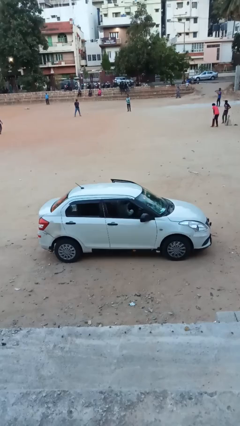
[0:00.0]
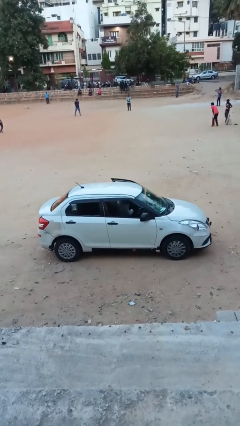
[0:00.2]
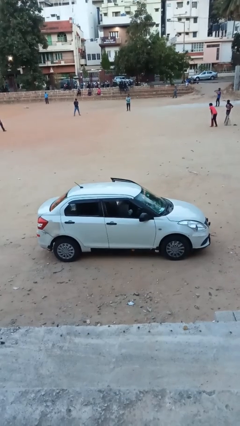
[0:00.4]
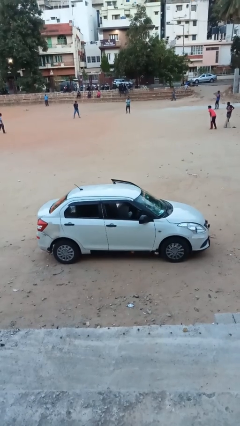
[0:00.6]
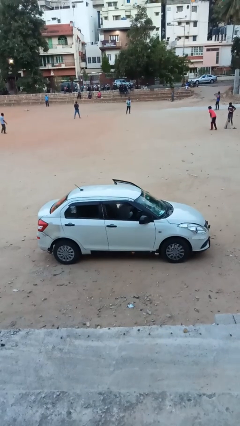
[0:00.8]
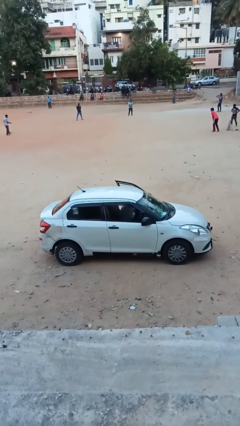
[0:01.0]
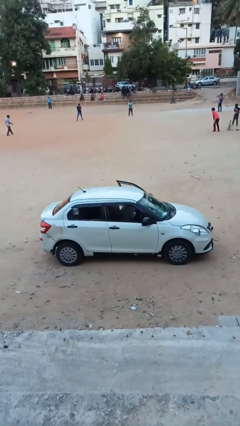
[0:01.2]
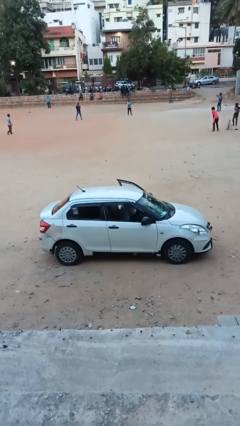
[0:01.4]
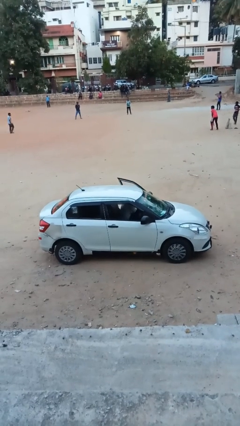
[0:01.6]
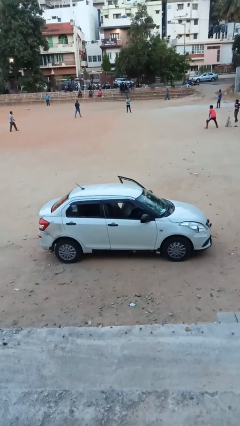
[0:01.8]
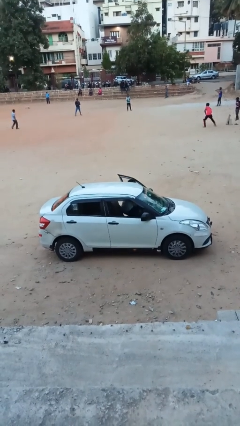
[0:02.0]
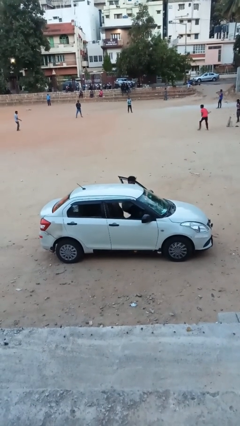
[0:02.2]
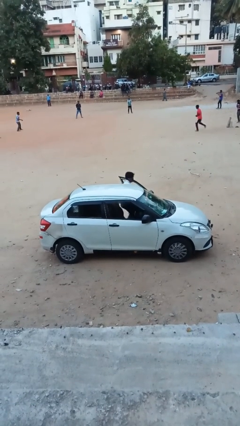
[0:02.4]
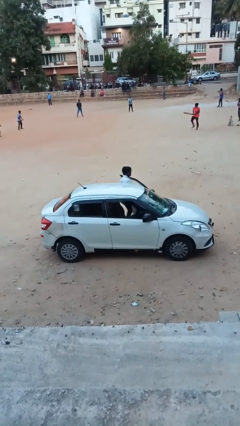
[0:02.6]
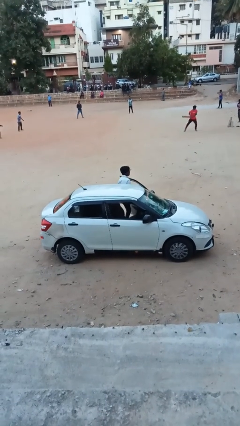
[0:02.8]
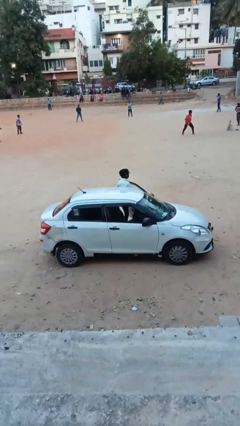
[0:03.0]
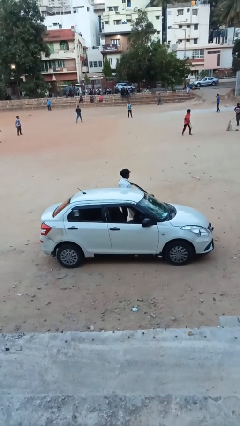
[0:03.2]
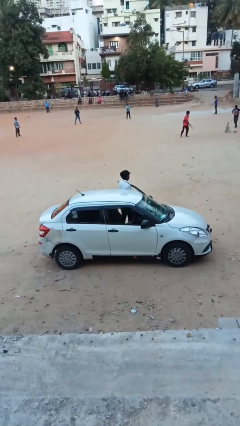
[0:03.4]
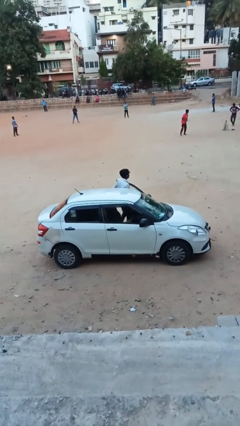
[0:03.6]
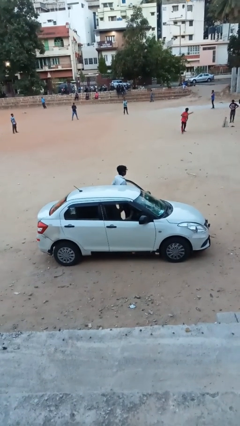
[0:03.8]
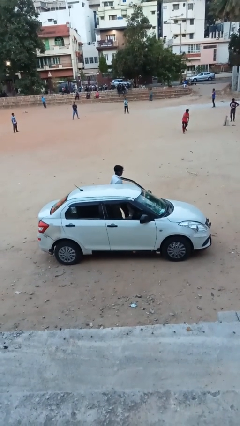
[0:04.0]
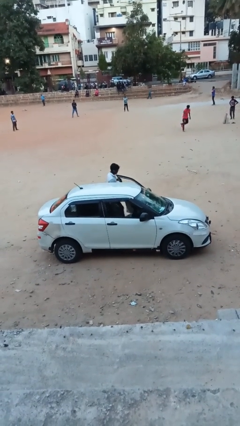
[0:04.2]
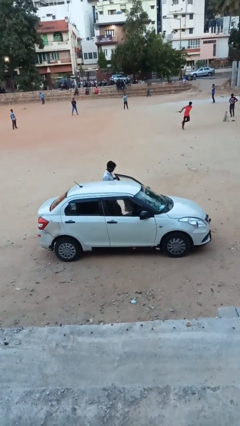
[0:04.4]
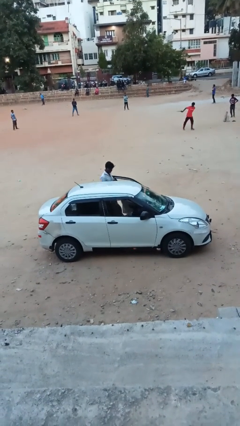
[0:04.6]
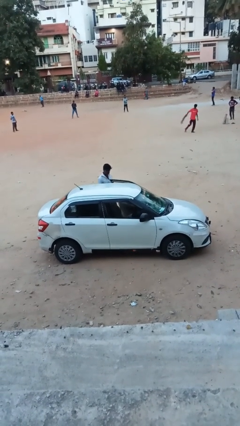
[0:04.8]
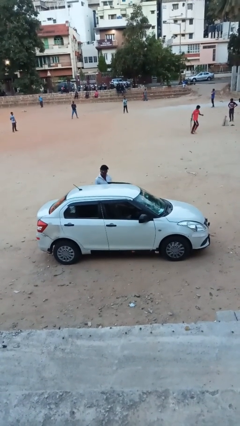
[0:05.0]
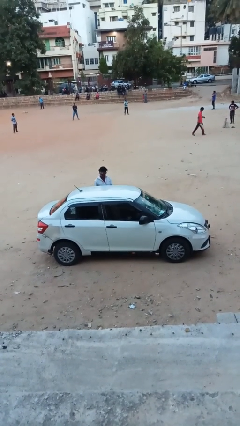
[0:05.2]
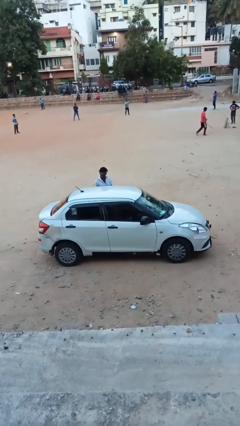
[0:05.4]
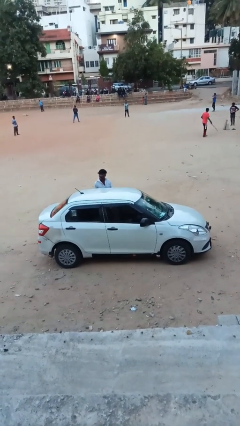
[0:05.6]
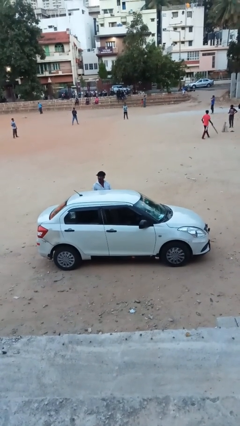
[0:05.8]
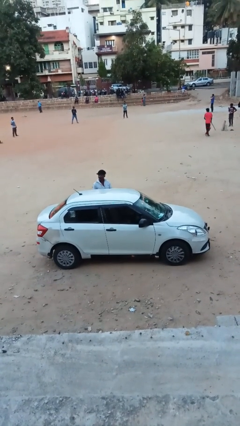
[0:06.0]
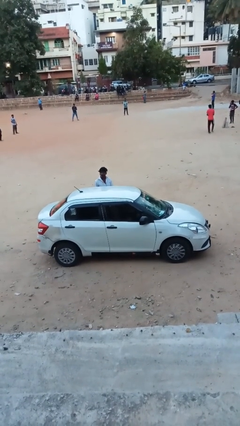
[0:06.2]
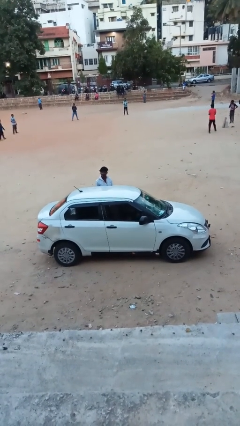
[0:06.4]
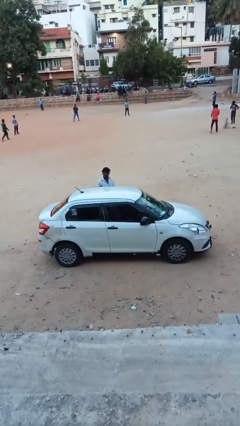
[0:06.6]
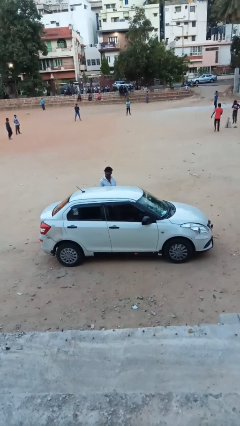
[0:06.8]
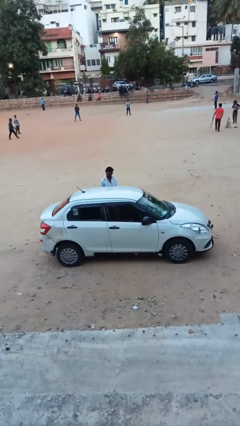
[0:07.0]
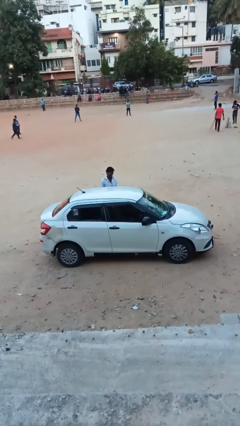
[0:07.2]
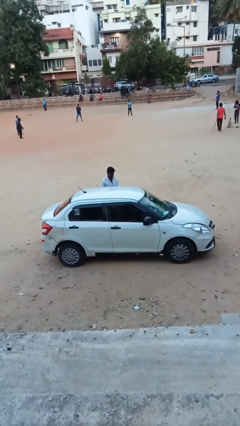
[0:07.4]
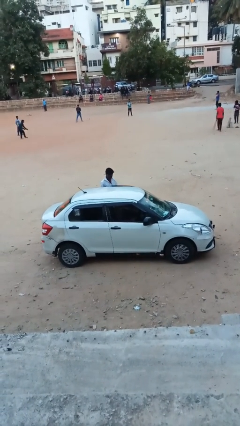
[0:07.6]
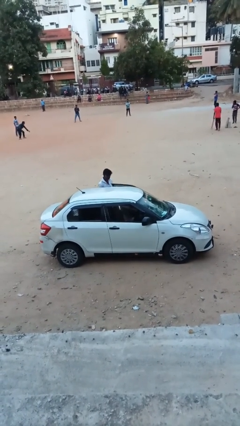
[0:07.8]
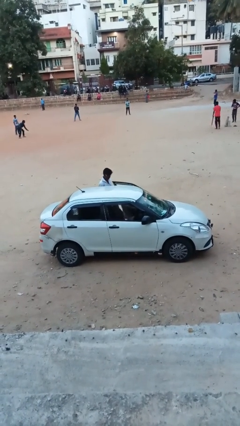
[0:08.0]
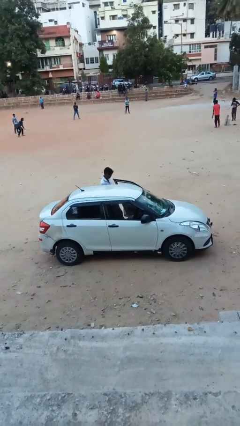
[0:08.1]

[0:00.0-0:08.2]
car drops off person

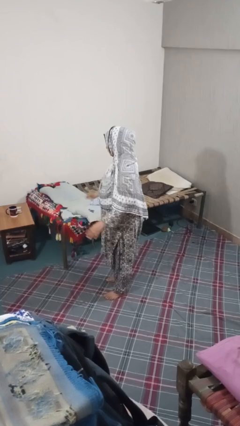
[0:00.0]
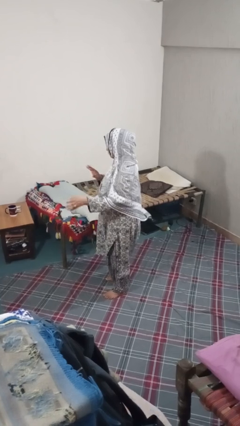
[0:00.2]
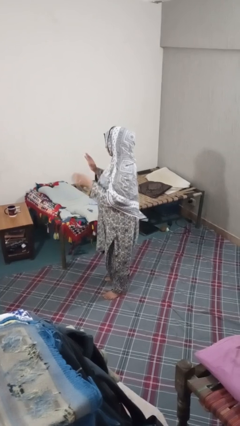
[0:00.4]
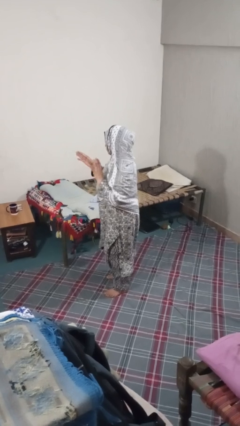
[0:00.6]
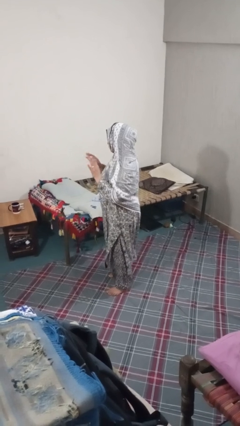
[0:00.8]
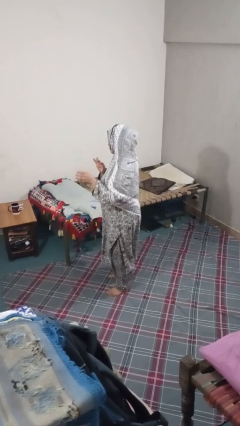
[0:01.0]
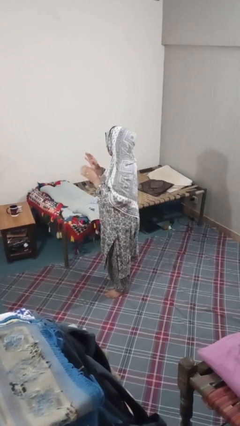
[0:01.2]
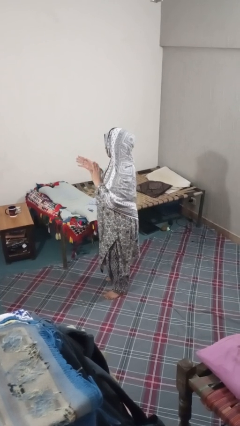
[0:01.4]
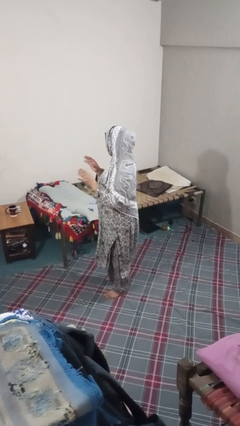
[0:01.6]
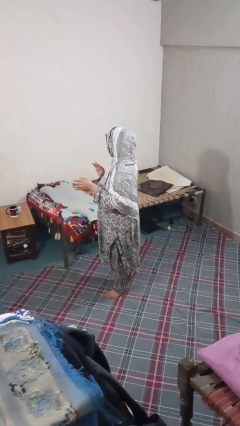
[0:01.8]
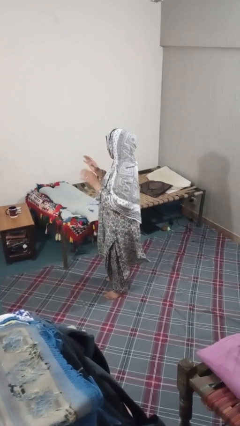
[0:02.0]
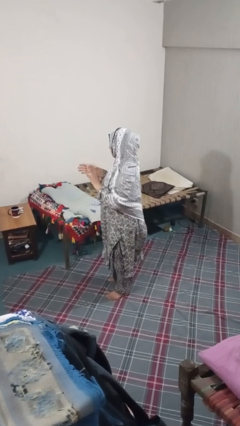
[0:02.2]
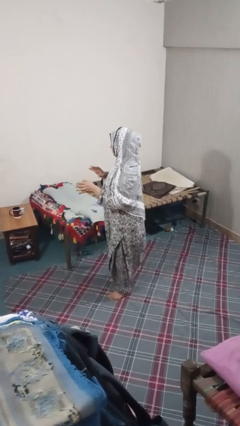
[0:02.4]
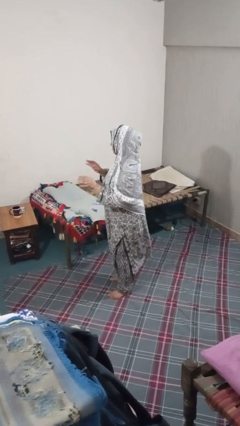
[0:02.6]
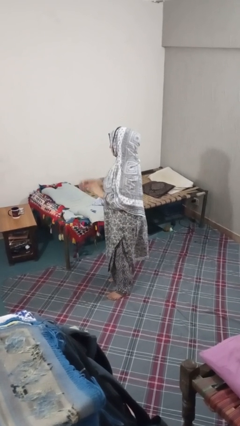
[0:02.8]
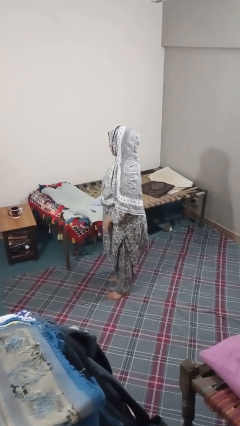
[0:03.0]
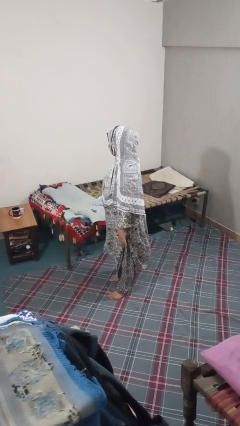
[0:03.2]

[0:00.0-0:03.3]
person dances in place

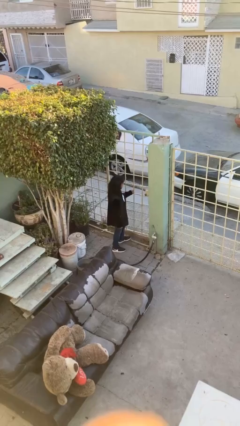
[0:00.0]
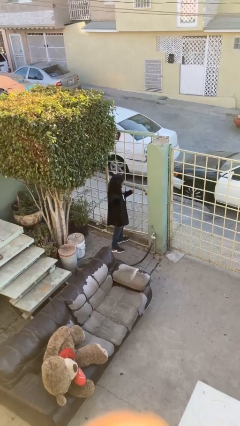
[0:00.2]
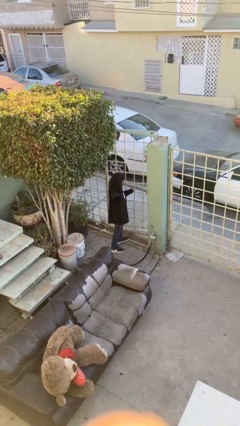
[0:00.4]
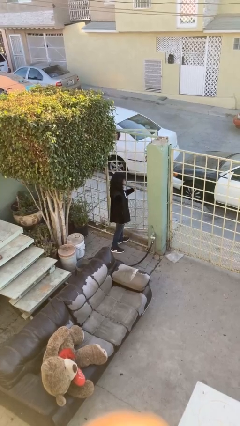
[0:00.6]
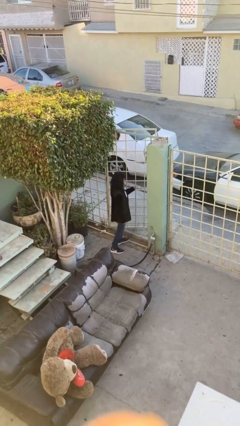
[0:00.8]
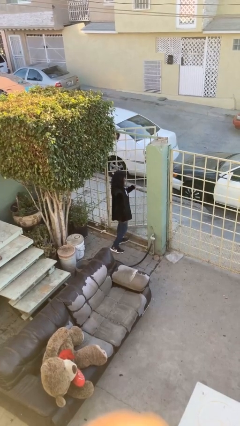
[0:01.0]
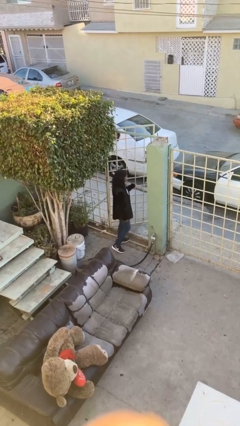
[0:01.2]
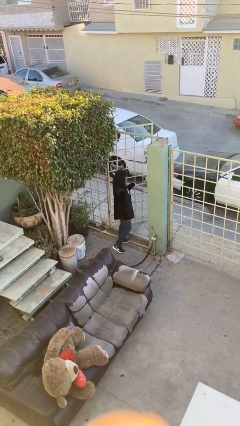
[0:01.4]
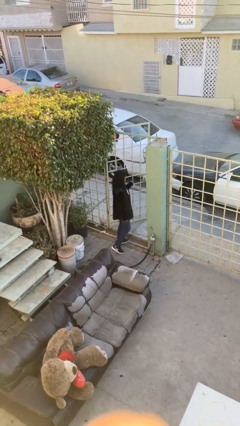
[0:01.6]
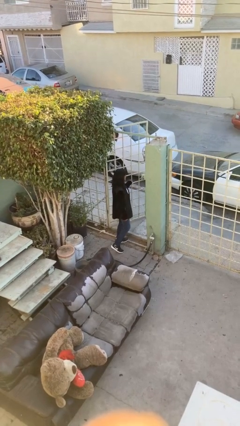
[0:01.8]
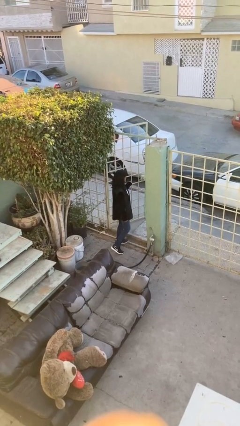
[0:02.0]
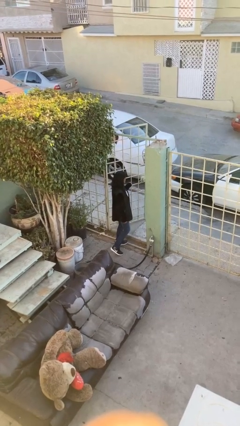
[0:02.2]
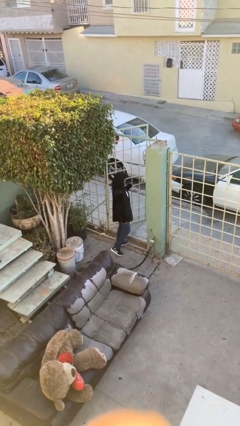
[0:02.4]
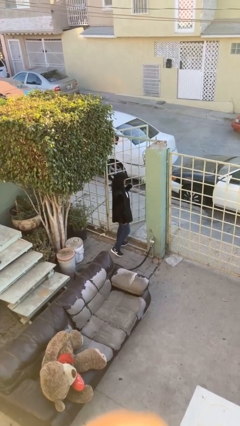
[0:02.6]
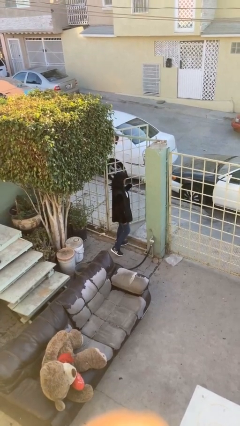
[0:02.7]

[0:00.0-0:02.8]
person opens facility door

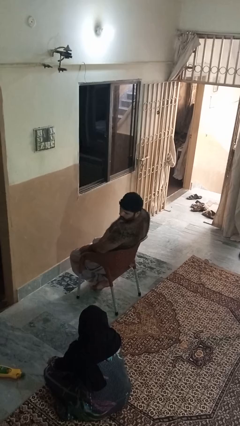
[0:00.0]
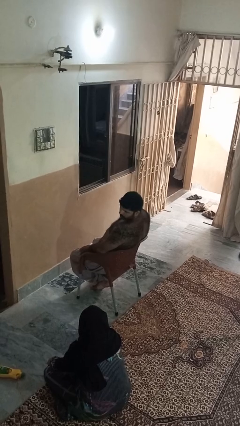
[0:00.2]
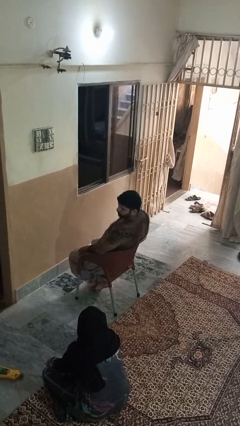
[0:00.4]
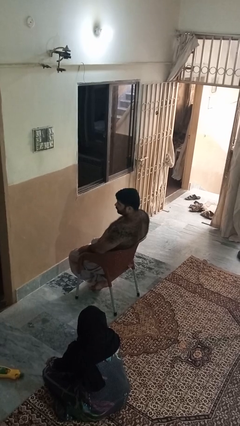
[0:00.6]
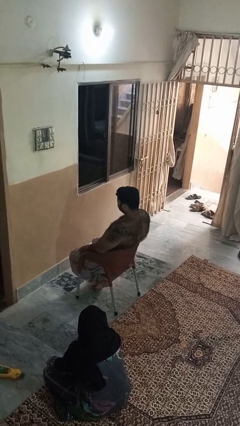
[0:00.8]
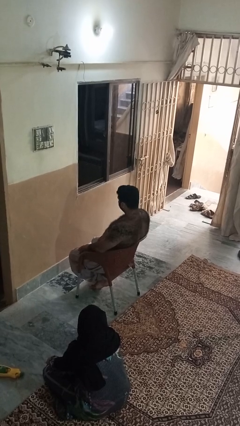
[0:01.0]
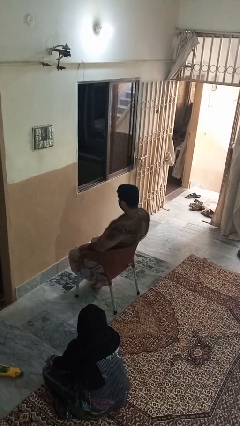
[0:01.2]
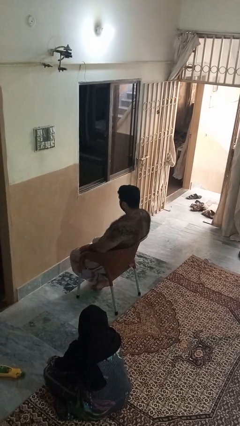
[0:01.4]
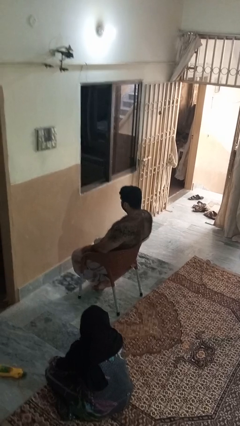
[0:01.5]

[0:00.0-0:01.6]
person looks over shoulder

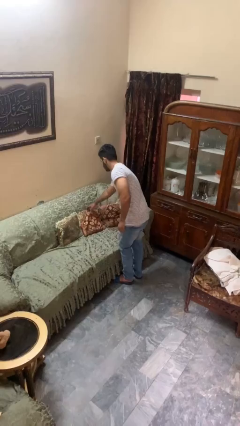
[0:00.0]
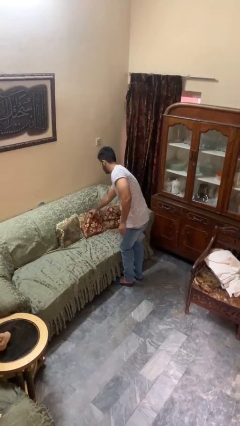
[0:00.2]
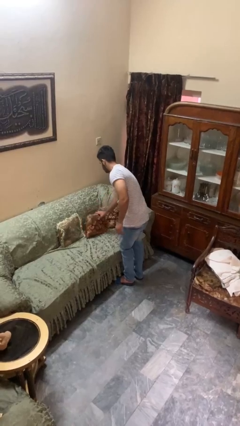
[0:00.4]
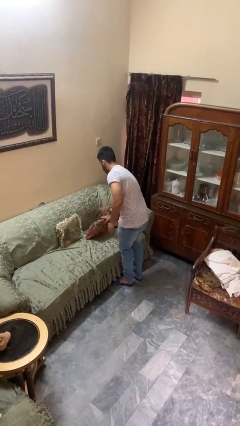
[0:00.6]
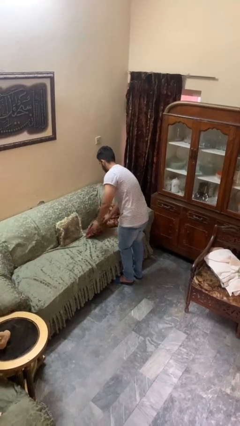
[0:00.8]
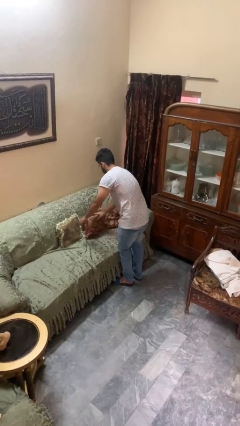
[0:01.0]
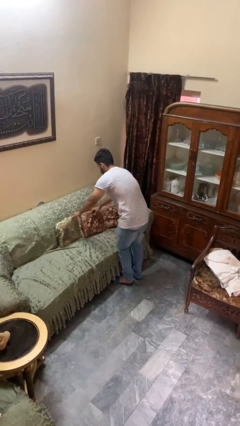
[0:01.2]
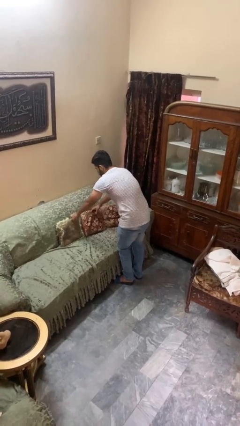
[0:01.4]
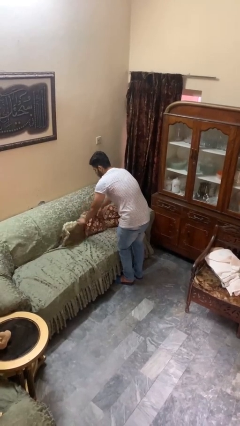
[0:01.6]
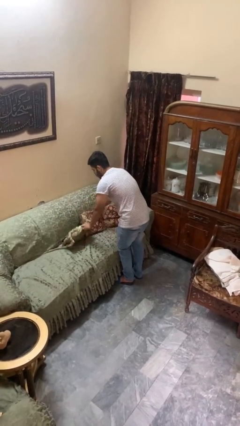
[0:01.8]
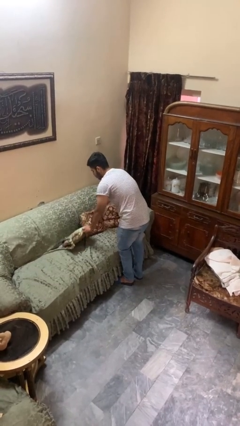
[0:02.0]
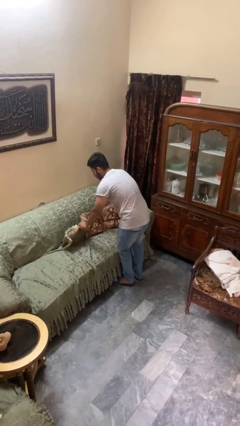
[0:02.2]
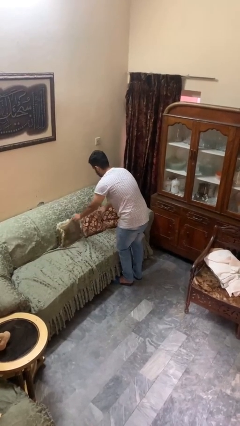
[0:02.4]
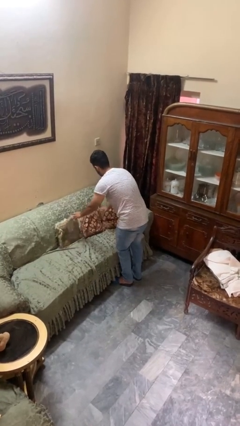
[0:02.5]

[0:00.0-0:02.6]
person searches in couch
